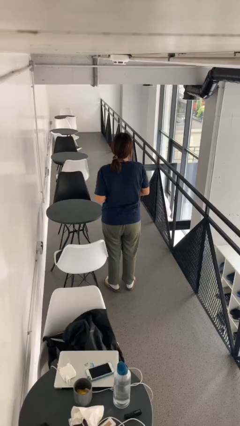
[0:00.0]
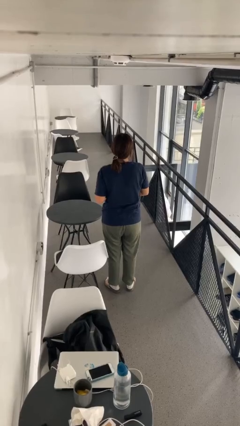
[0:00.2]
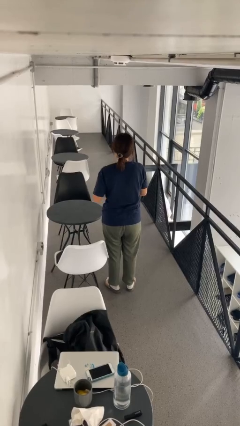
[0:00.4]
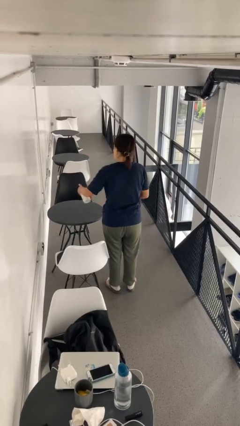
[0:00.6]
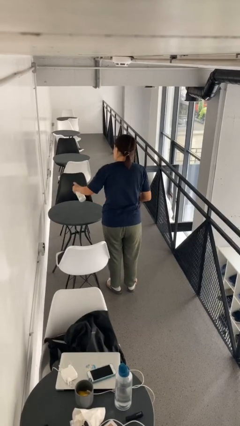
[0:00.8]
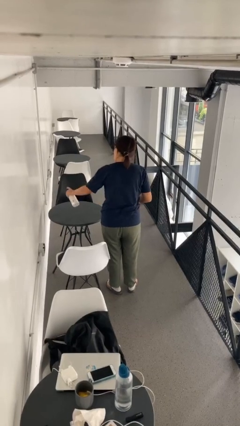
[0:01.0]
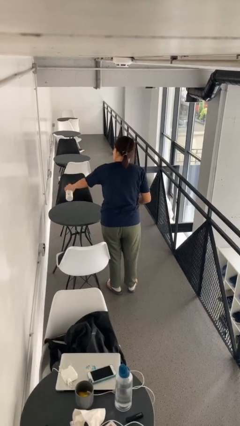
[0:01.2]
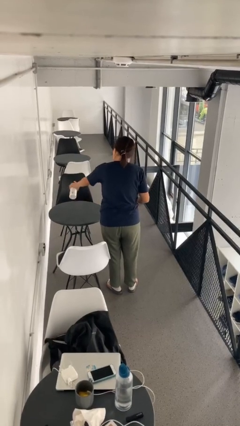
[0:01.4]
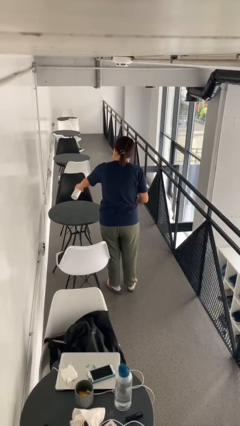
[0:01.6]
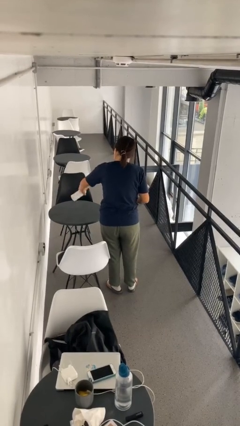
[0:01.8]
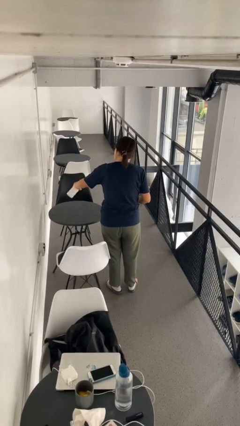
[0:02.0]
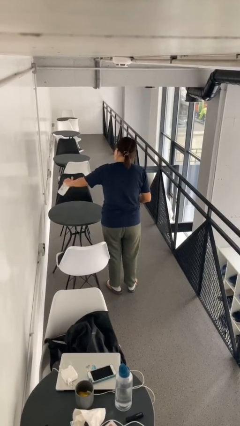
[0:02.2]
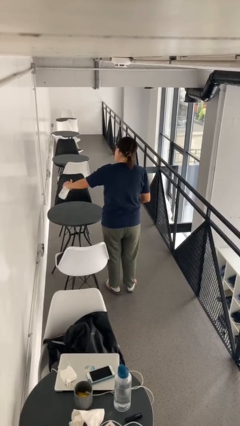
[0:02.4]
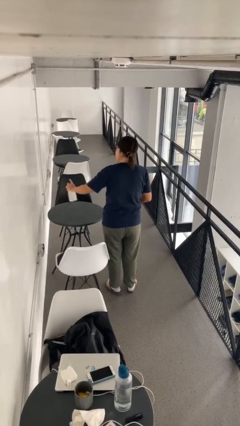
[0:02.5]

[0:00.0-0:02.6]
person sprays from bottle

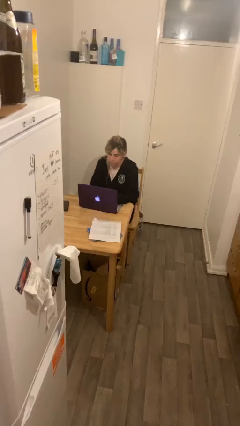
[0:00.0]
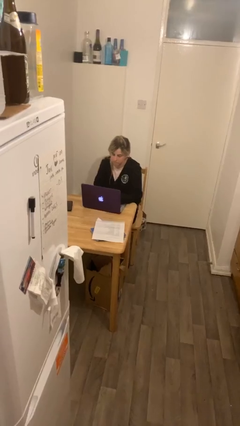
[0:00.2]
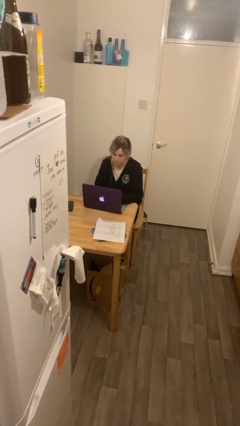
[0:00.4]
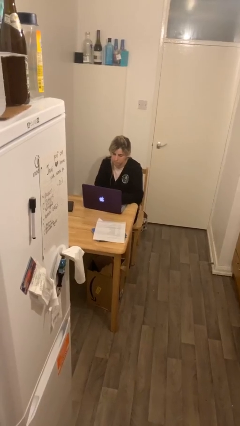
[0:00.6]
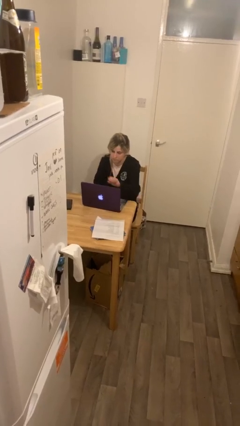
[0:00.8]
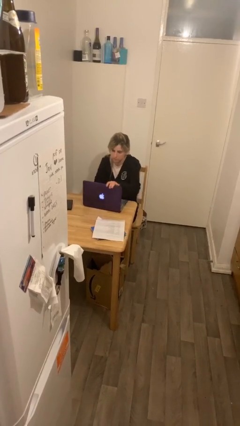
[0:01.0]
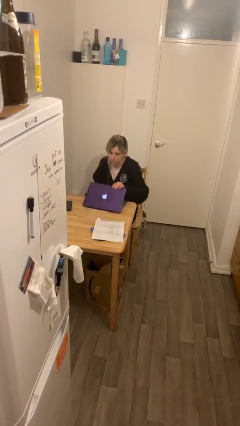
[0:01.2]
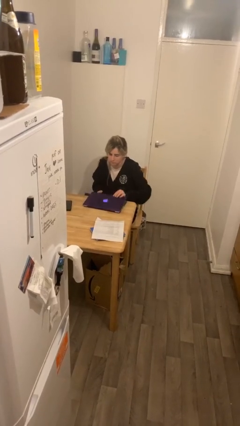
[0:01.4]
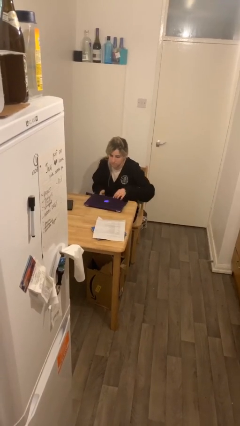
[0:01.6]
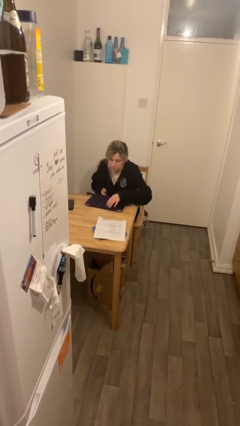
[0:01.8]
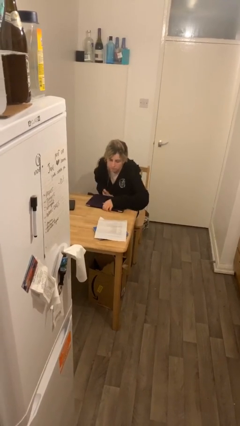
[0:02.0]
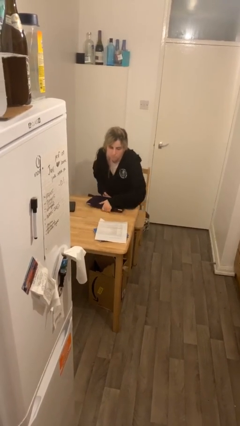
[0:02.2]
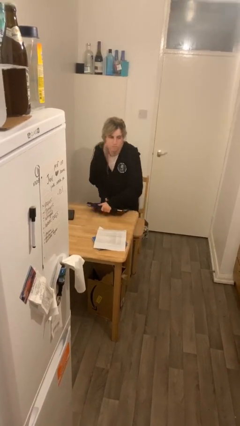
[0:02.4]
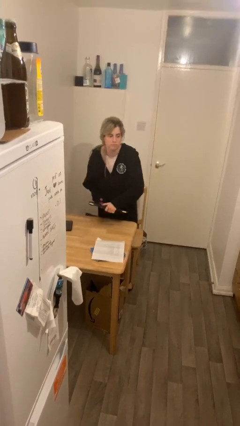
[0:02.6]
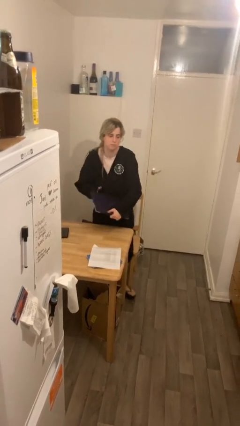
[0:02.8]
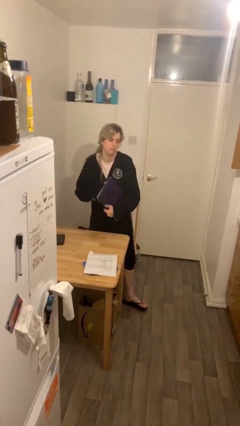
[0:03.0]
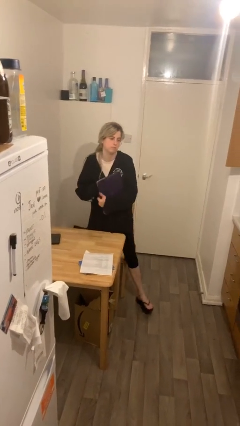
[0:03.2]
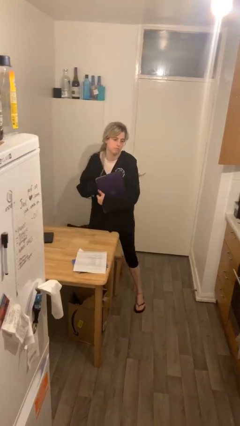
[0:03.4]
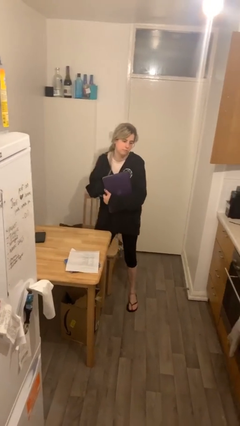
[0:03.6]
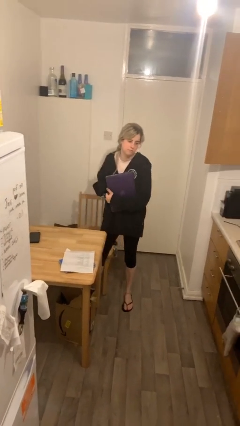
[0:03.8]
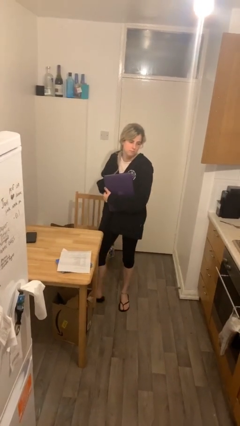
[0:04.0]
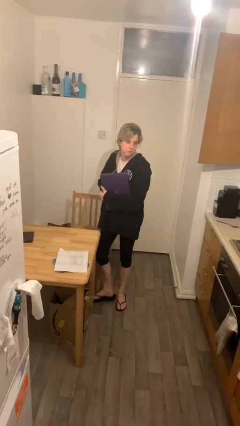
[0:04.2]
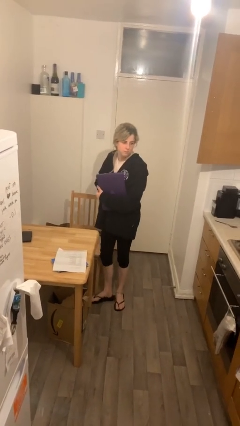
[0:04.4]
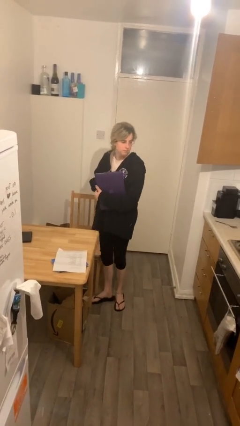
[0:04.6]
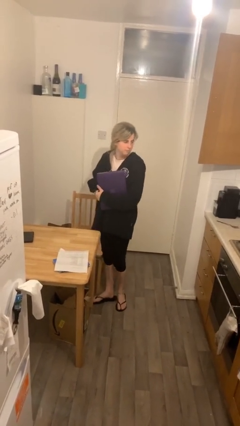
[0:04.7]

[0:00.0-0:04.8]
person stands up

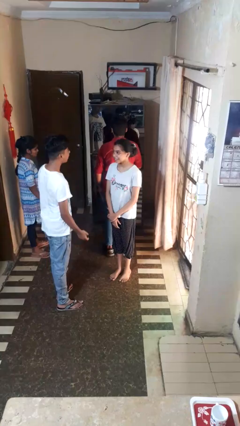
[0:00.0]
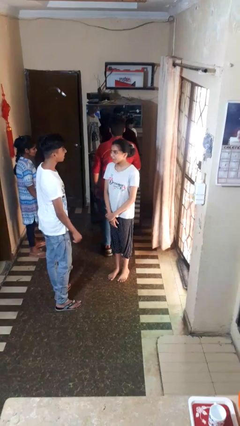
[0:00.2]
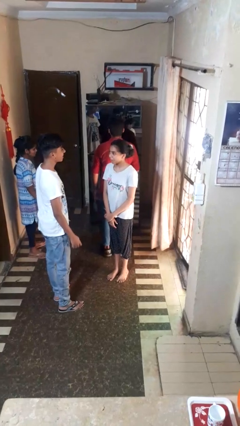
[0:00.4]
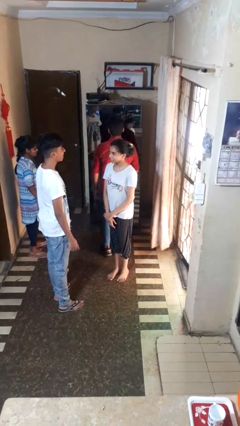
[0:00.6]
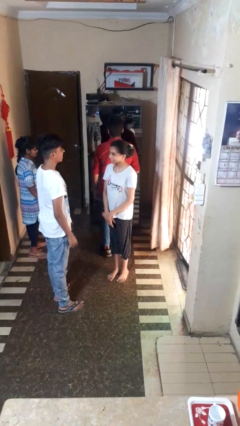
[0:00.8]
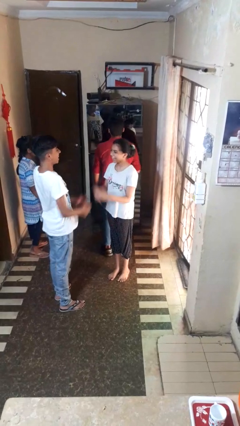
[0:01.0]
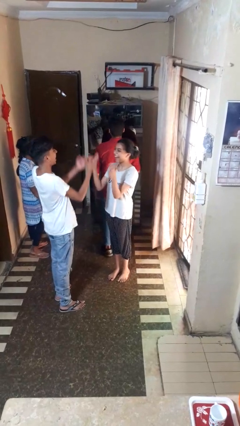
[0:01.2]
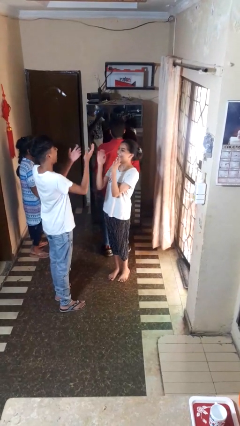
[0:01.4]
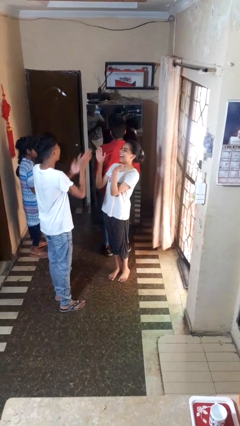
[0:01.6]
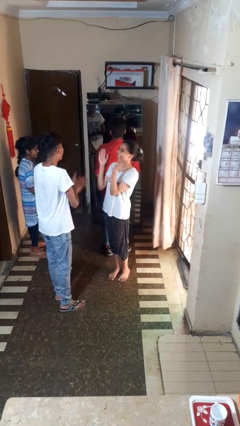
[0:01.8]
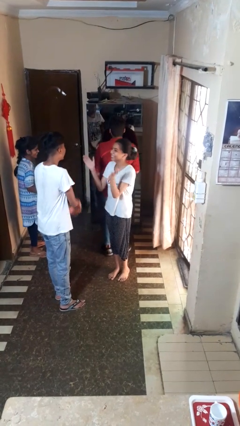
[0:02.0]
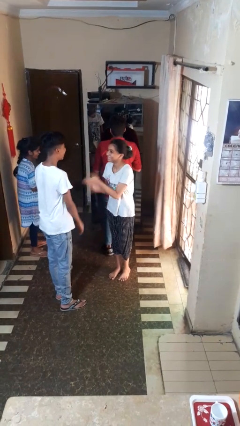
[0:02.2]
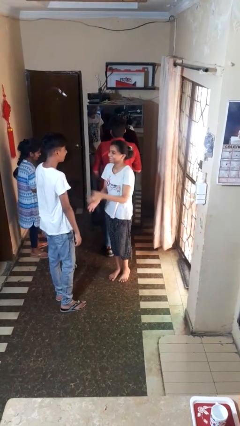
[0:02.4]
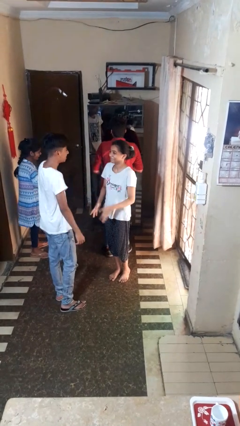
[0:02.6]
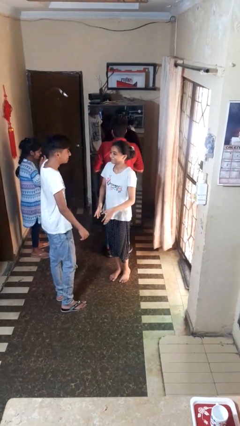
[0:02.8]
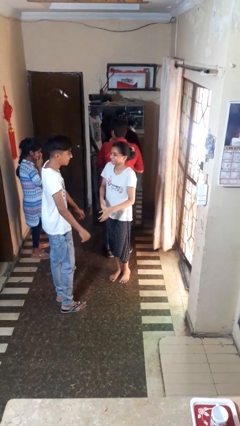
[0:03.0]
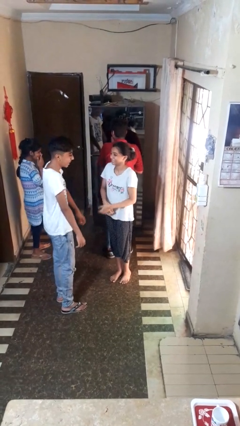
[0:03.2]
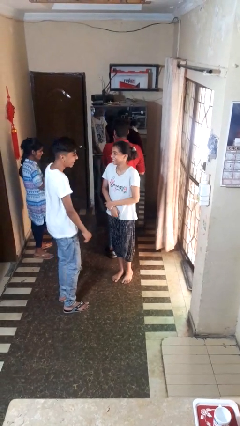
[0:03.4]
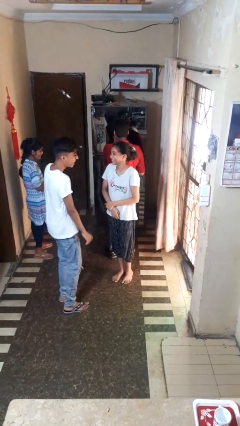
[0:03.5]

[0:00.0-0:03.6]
person laughs with person

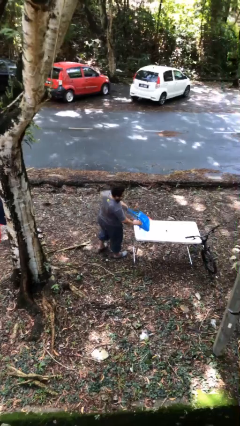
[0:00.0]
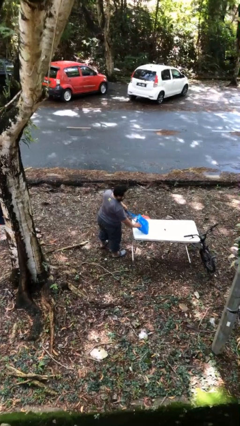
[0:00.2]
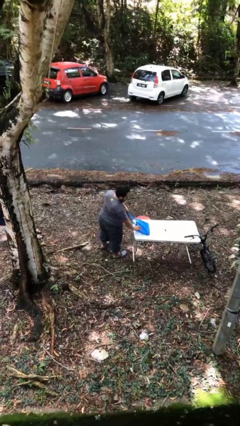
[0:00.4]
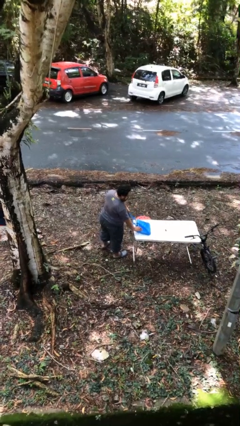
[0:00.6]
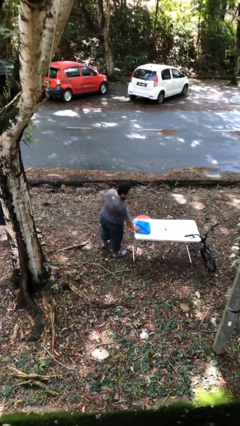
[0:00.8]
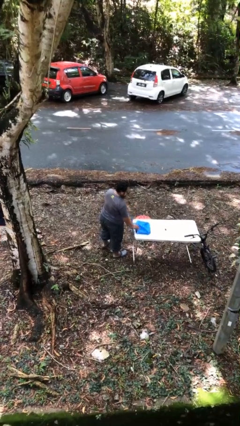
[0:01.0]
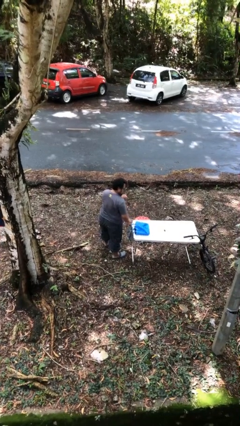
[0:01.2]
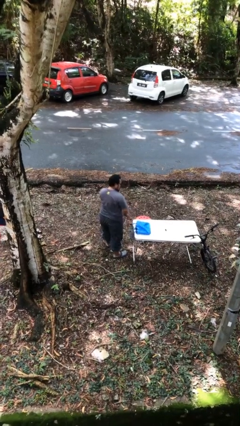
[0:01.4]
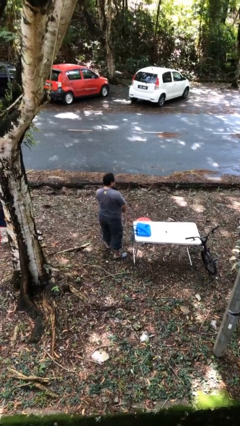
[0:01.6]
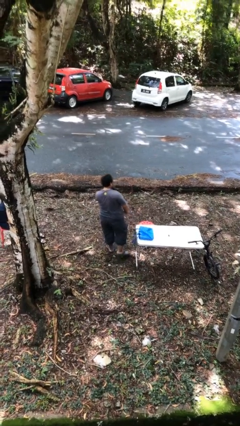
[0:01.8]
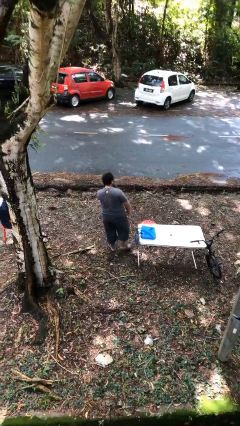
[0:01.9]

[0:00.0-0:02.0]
person puts down object on table

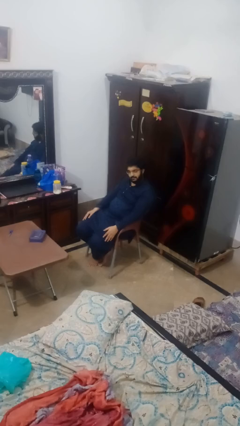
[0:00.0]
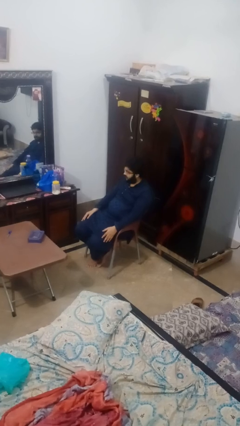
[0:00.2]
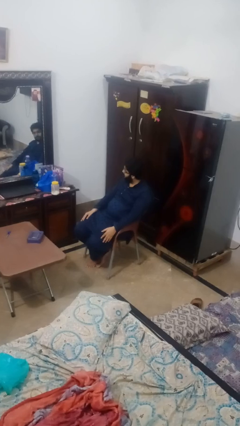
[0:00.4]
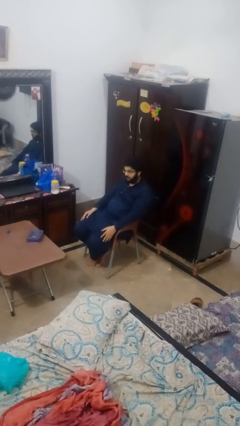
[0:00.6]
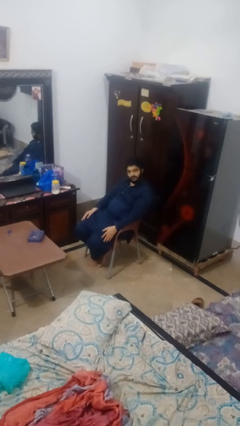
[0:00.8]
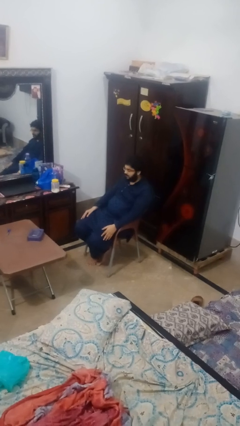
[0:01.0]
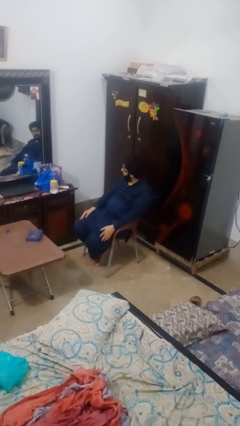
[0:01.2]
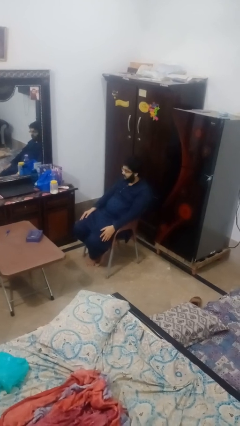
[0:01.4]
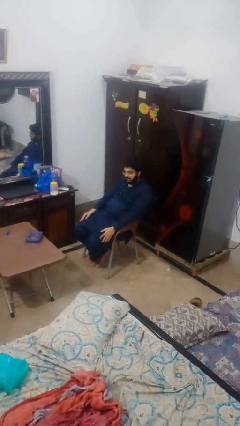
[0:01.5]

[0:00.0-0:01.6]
person shakes head

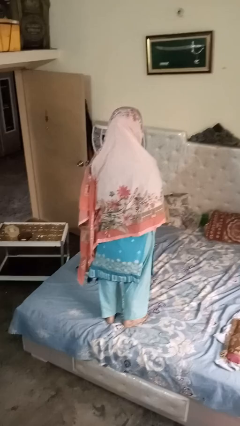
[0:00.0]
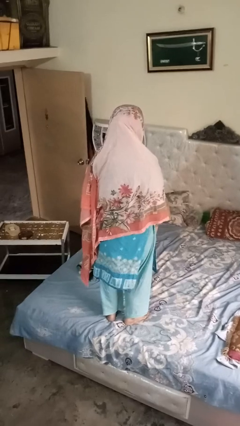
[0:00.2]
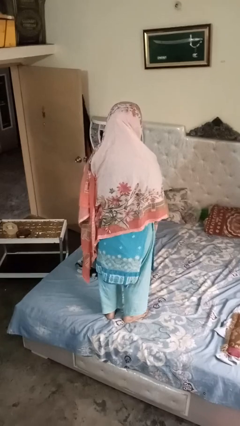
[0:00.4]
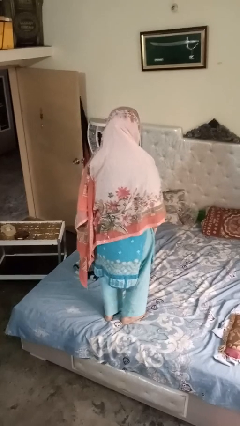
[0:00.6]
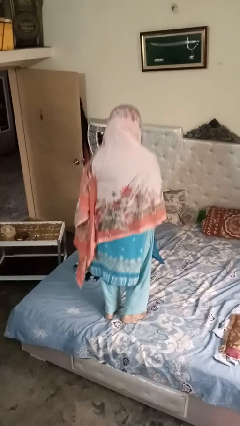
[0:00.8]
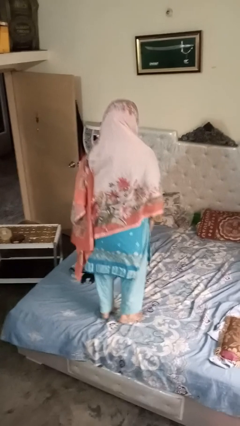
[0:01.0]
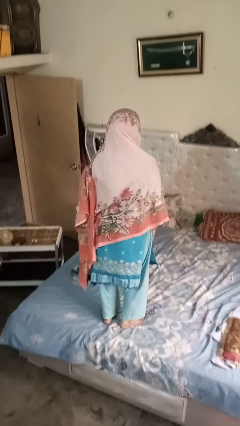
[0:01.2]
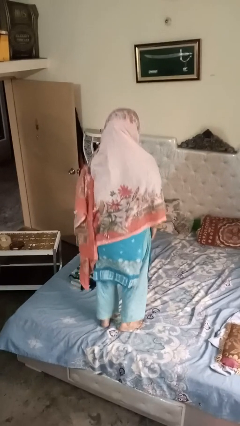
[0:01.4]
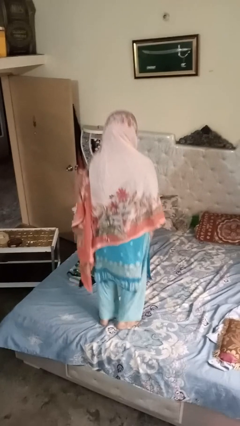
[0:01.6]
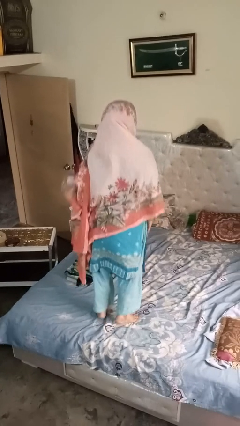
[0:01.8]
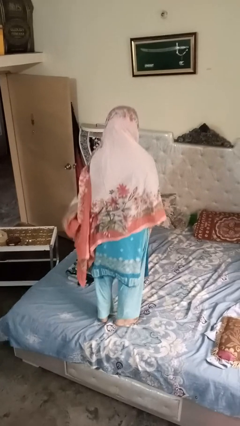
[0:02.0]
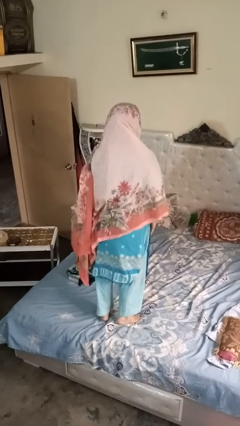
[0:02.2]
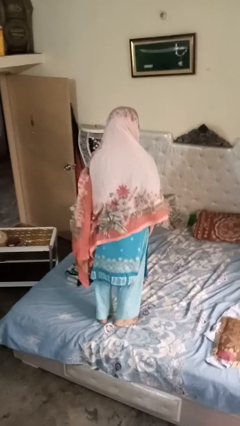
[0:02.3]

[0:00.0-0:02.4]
person jumps on bed

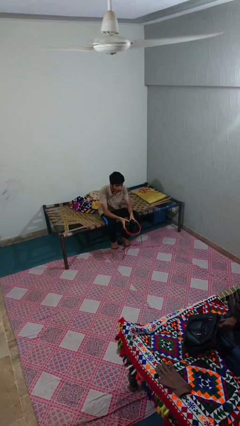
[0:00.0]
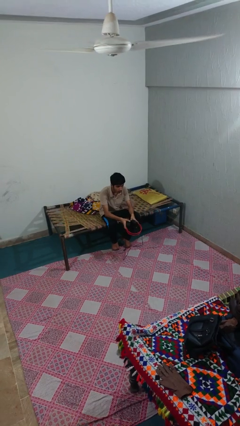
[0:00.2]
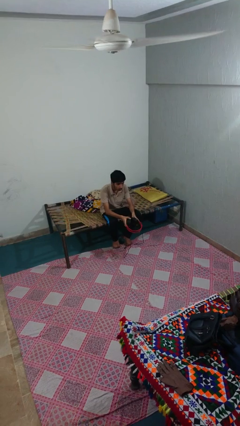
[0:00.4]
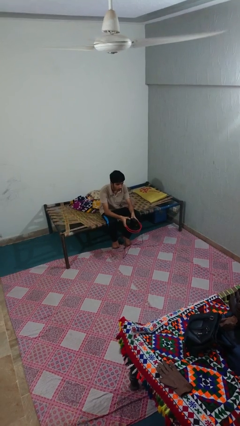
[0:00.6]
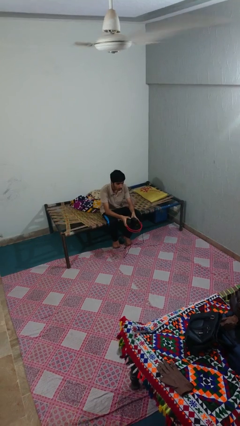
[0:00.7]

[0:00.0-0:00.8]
person takes off headphones
